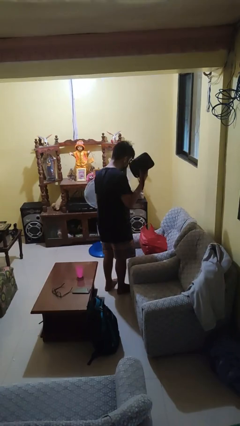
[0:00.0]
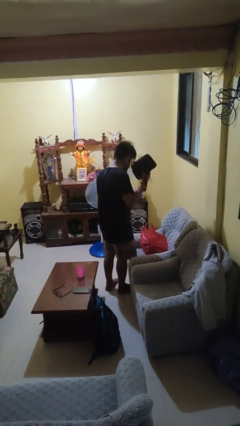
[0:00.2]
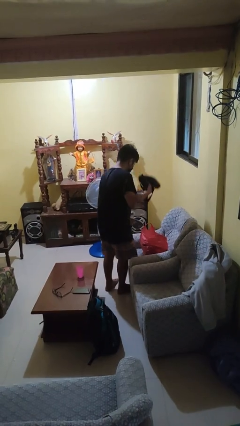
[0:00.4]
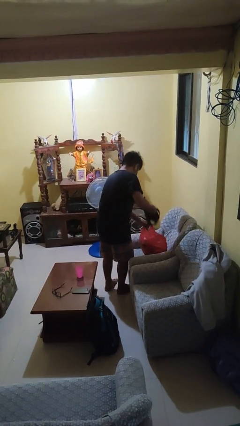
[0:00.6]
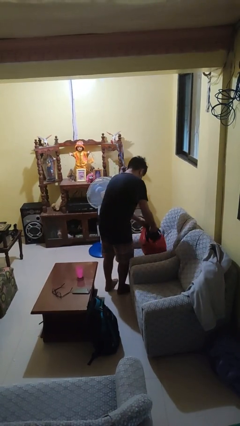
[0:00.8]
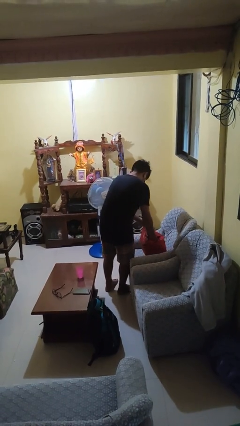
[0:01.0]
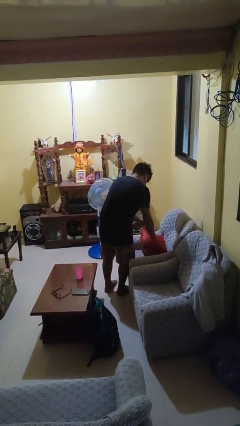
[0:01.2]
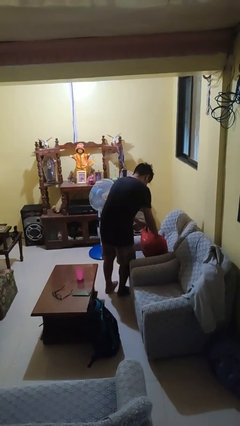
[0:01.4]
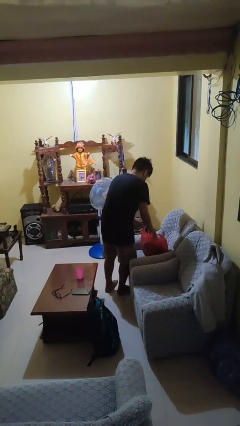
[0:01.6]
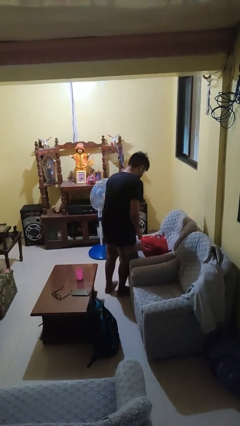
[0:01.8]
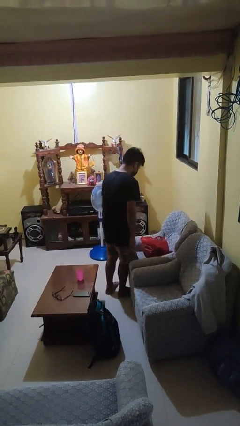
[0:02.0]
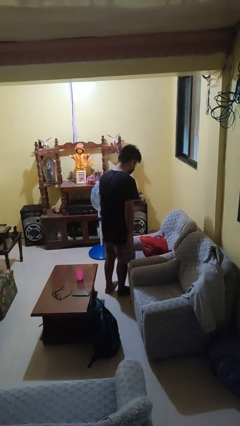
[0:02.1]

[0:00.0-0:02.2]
person puts object into bag

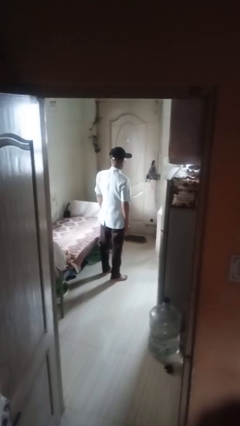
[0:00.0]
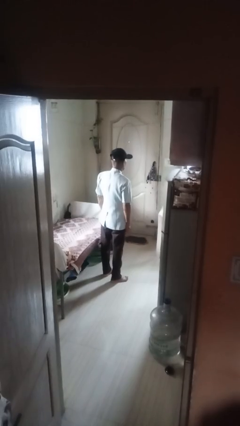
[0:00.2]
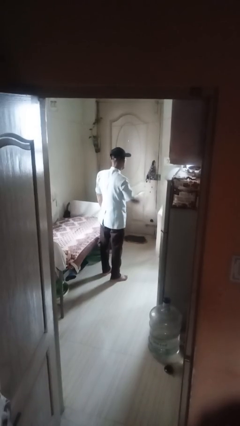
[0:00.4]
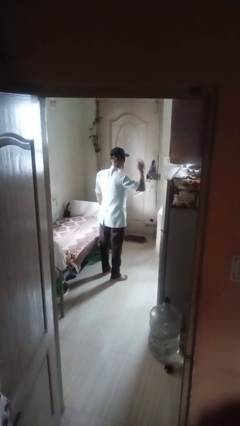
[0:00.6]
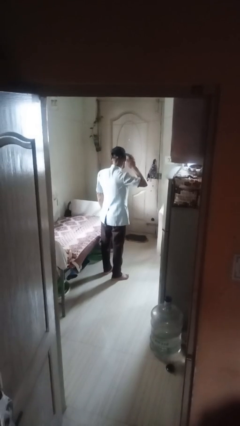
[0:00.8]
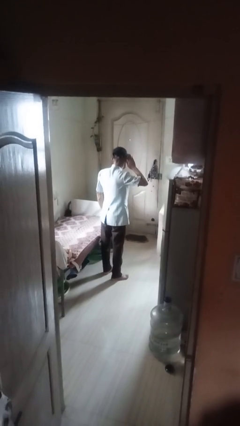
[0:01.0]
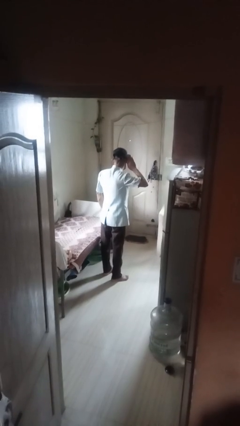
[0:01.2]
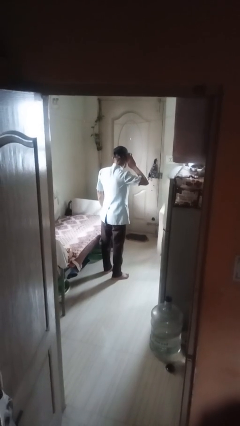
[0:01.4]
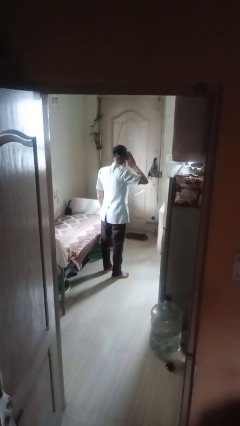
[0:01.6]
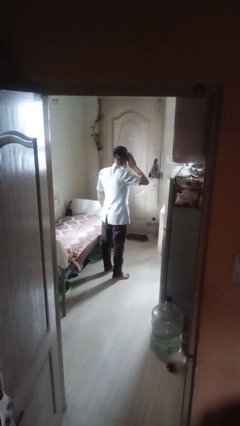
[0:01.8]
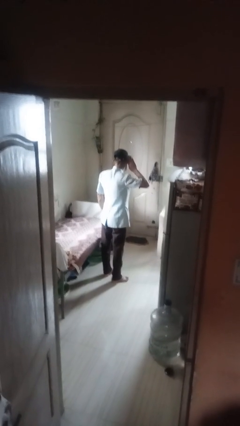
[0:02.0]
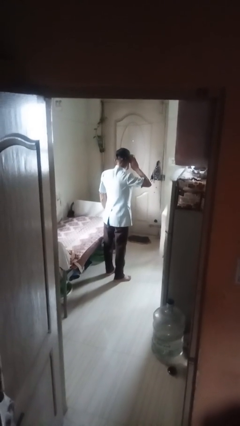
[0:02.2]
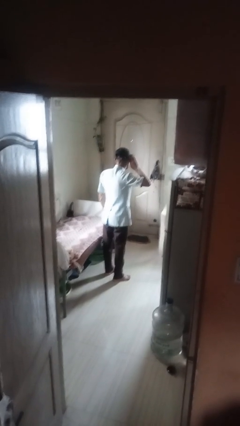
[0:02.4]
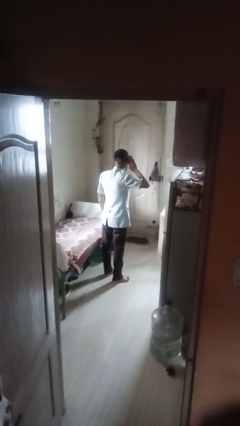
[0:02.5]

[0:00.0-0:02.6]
person gestures listen closely

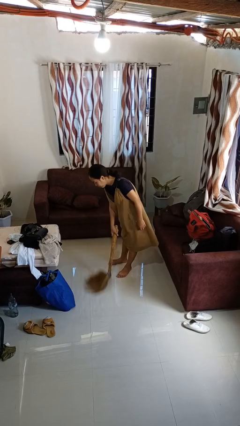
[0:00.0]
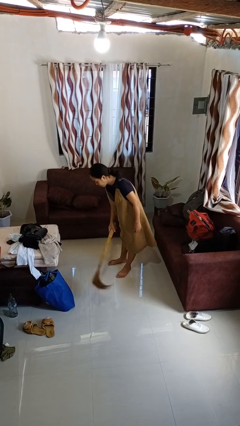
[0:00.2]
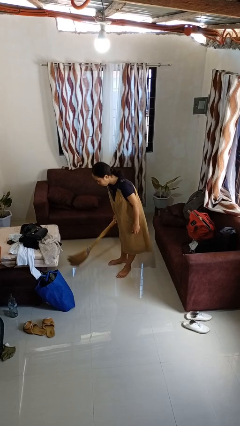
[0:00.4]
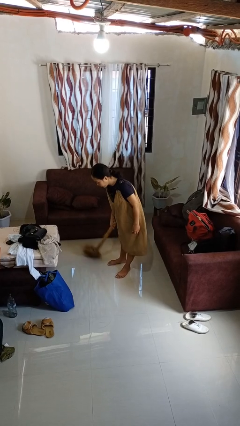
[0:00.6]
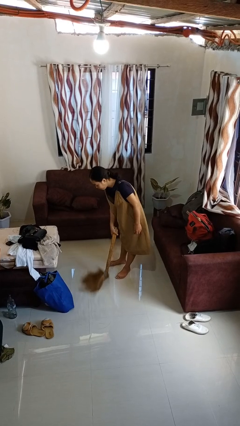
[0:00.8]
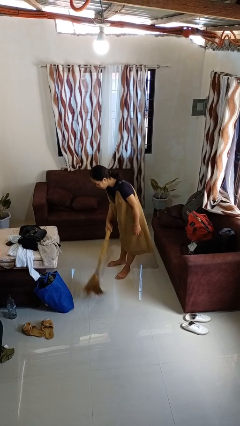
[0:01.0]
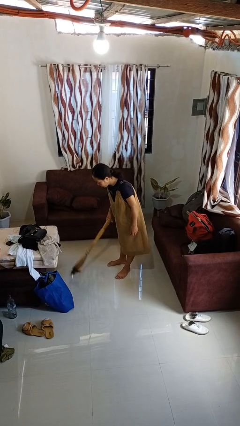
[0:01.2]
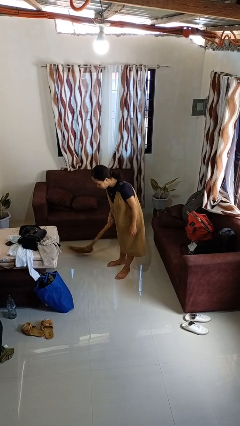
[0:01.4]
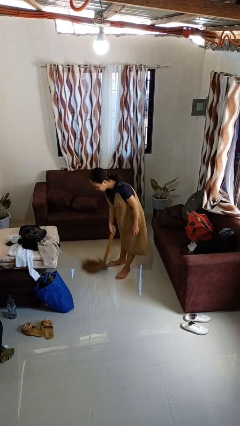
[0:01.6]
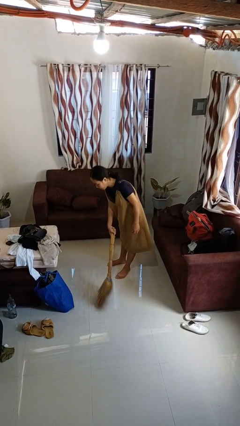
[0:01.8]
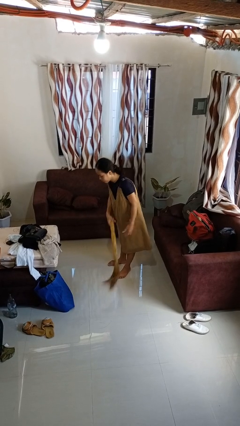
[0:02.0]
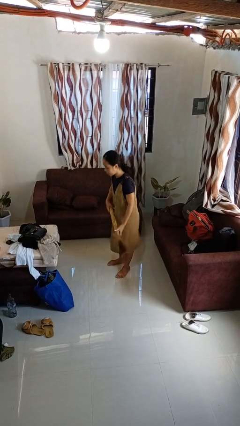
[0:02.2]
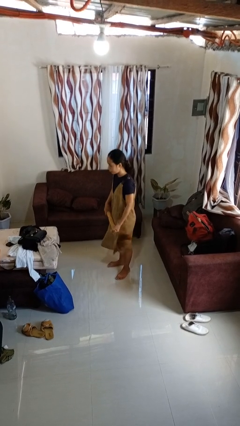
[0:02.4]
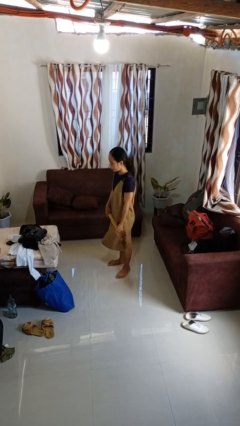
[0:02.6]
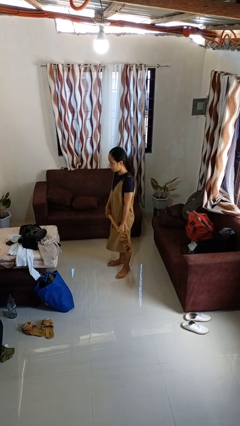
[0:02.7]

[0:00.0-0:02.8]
person sweeps floor

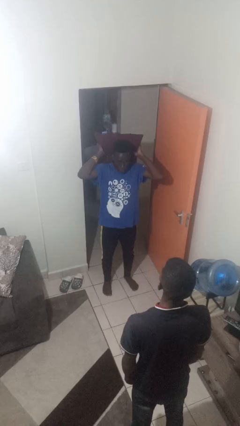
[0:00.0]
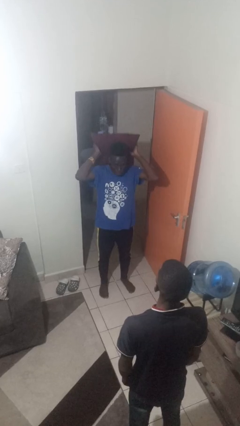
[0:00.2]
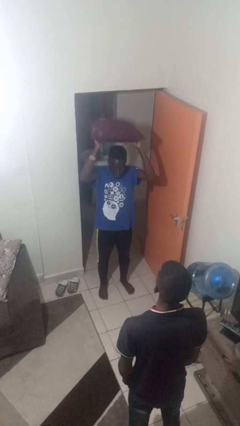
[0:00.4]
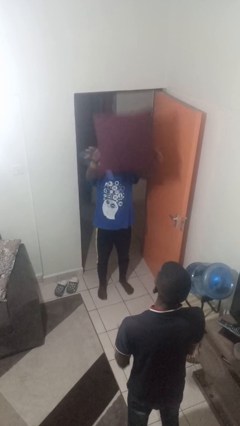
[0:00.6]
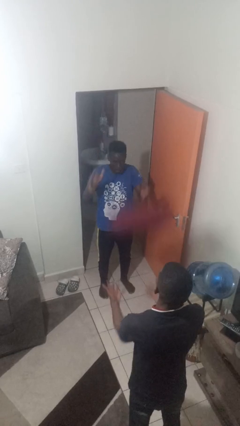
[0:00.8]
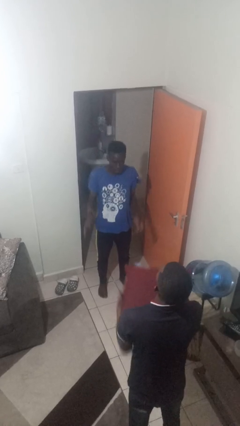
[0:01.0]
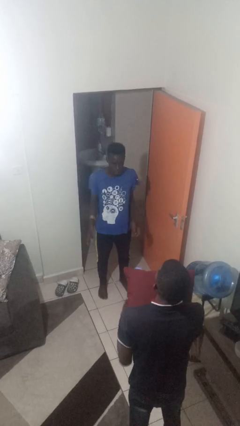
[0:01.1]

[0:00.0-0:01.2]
person throws object to person

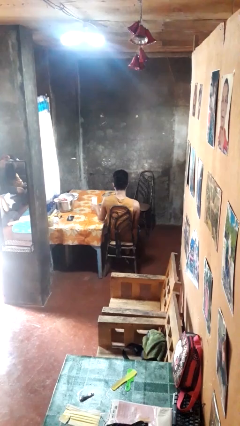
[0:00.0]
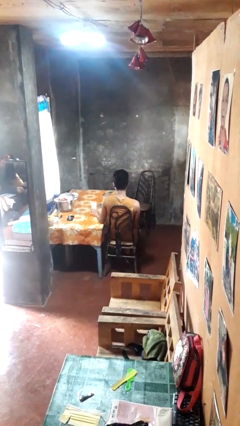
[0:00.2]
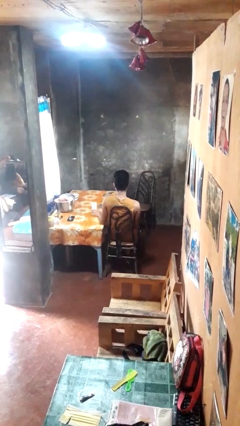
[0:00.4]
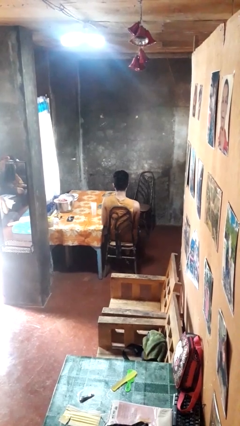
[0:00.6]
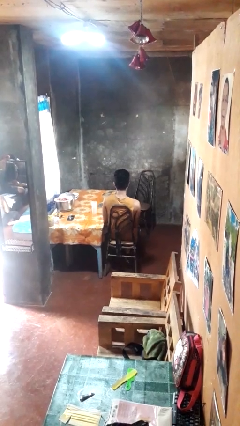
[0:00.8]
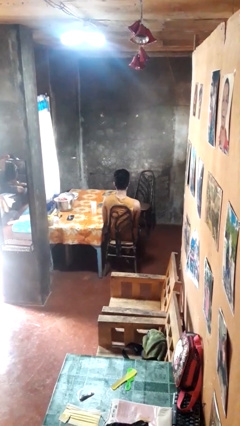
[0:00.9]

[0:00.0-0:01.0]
person sets upright glass

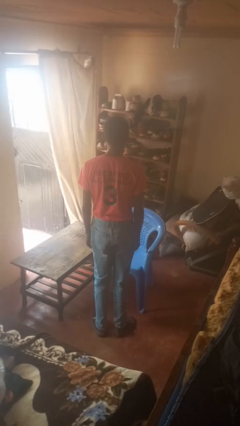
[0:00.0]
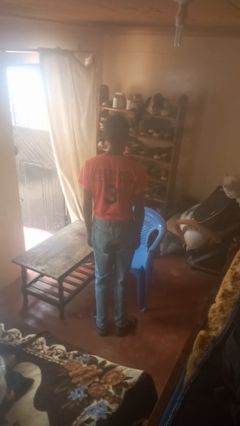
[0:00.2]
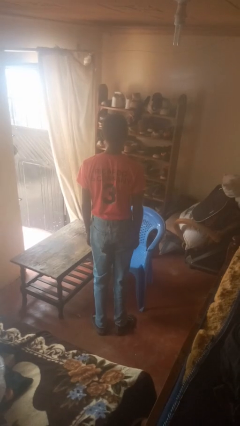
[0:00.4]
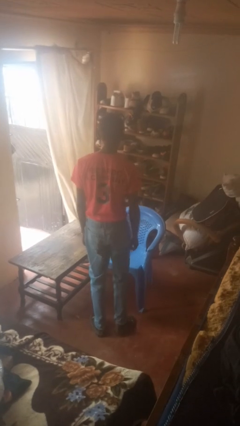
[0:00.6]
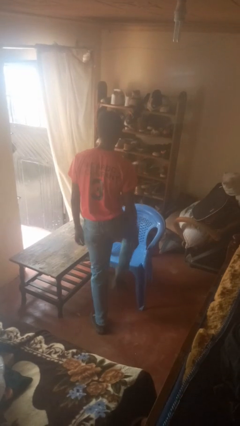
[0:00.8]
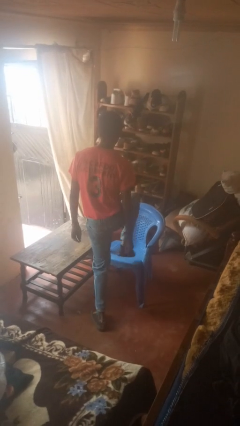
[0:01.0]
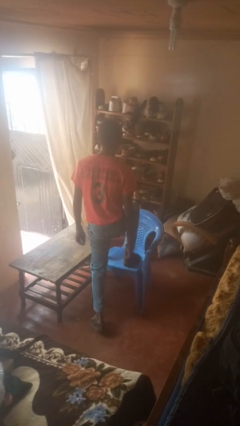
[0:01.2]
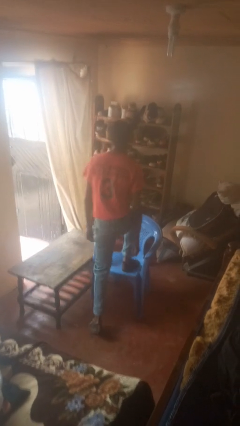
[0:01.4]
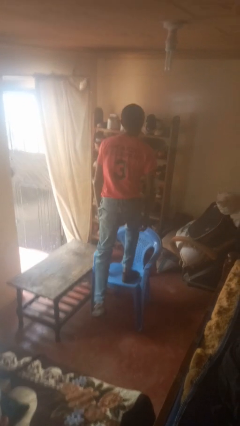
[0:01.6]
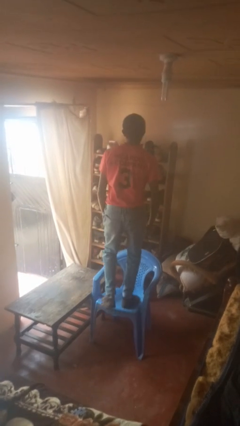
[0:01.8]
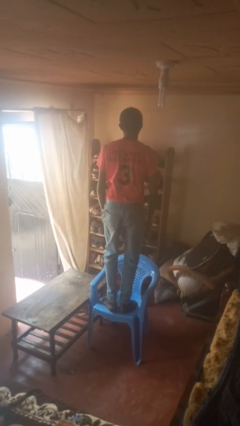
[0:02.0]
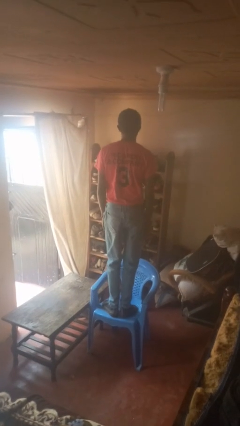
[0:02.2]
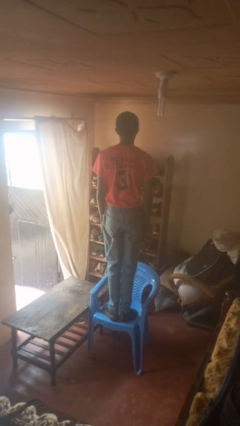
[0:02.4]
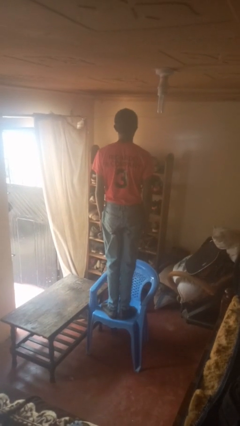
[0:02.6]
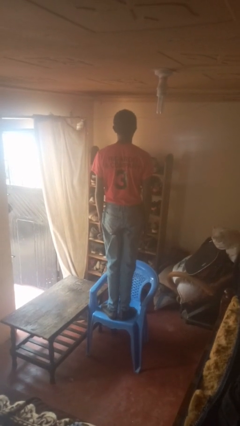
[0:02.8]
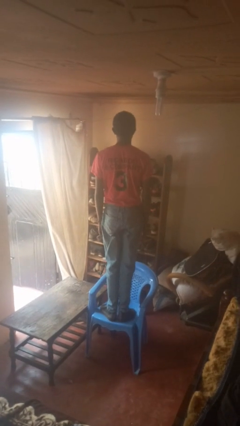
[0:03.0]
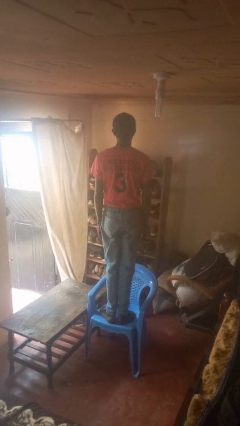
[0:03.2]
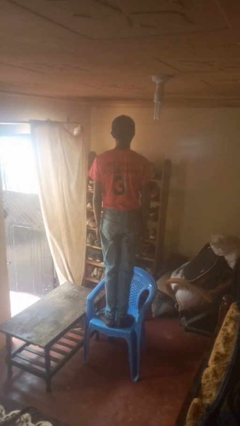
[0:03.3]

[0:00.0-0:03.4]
person climbs on chair

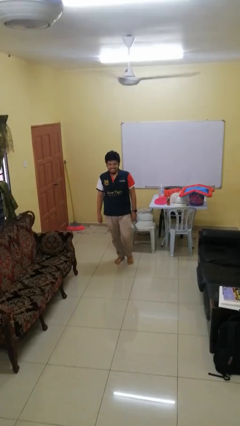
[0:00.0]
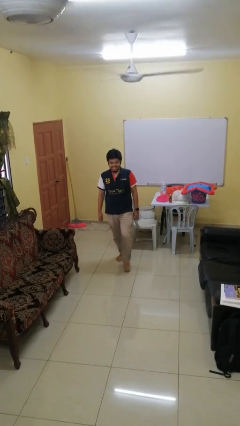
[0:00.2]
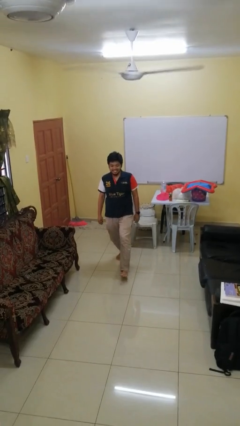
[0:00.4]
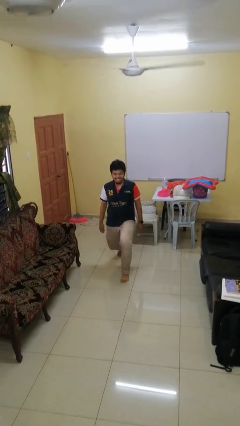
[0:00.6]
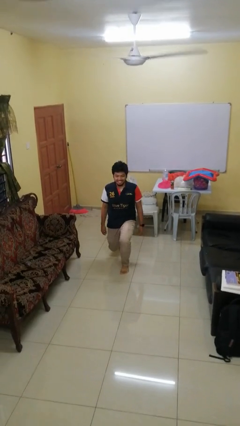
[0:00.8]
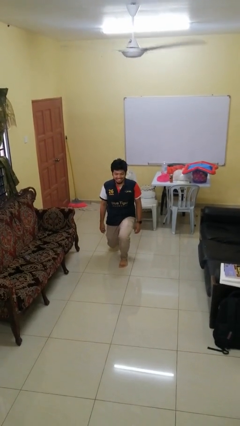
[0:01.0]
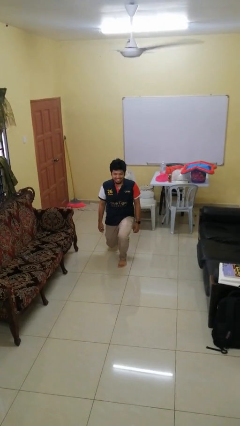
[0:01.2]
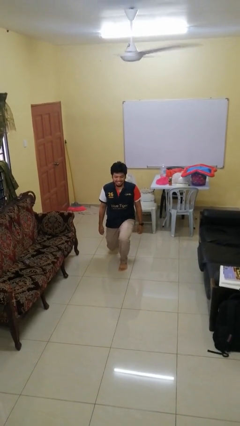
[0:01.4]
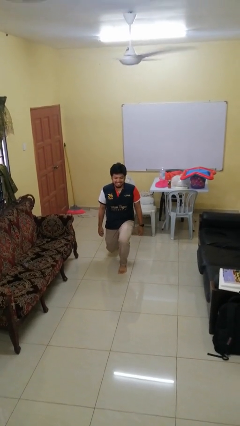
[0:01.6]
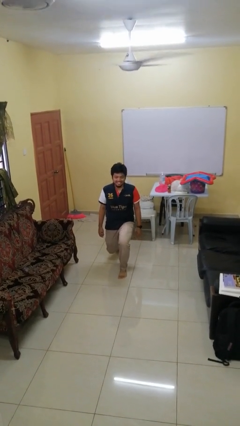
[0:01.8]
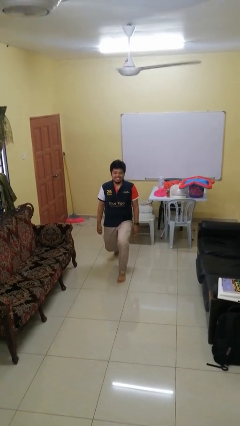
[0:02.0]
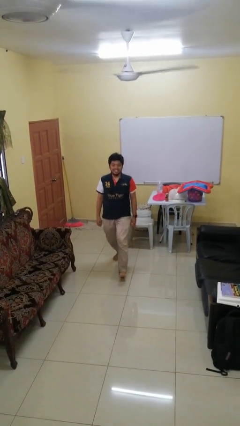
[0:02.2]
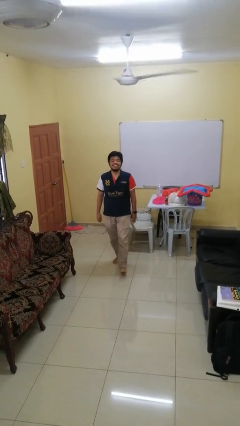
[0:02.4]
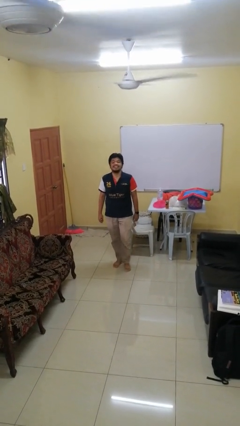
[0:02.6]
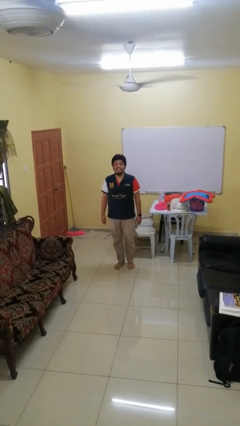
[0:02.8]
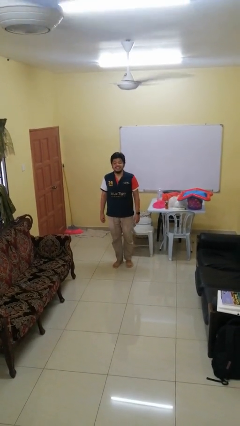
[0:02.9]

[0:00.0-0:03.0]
person exercises with lunges

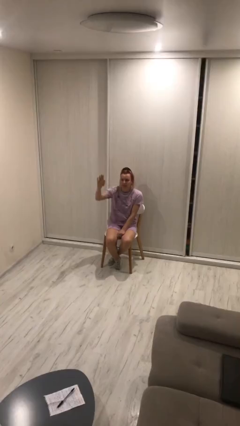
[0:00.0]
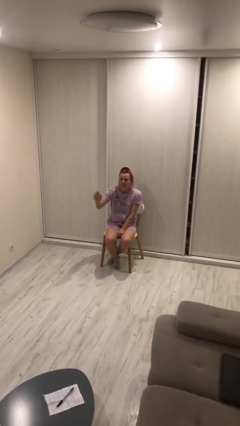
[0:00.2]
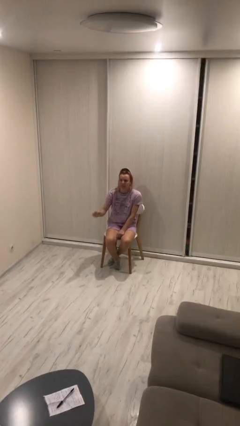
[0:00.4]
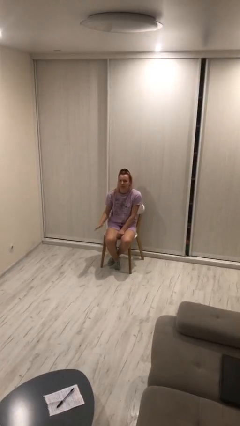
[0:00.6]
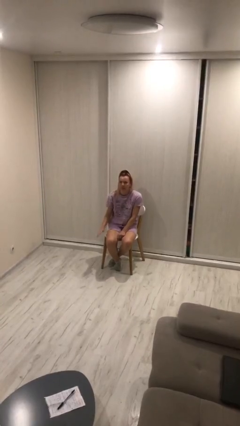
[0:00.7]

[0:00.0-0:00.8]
person gestures lower hand
